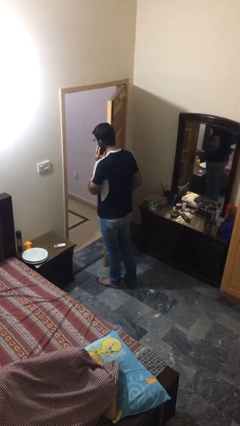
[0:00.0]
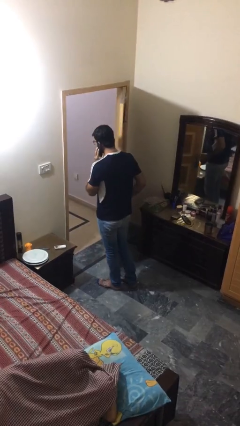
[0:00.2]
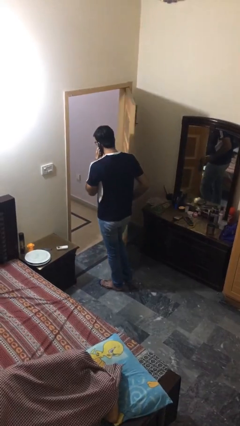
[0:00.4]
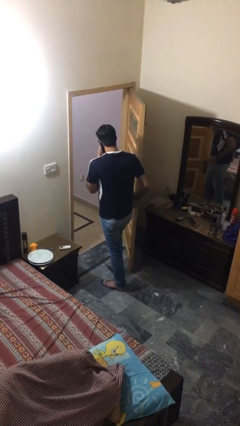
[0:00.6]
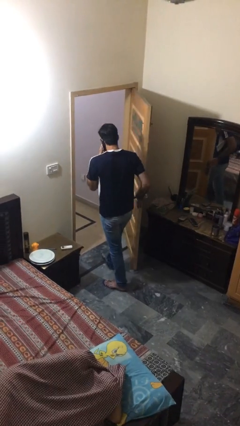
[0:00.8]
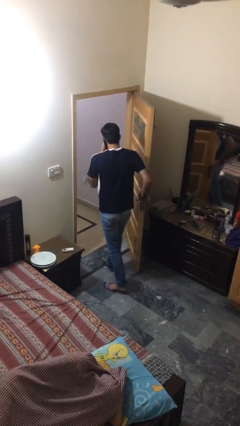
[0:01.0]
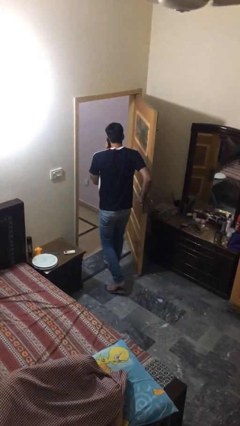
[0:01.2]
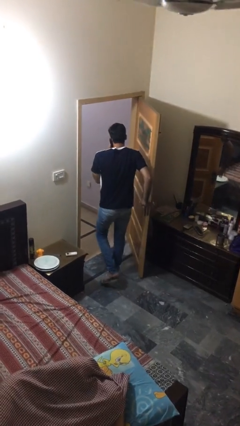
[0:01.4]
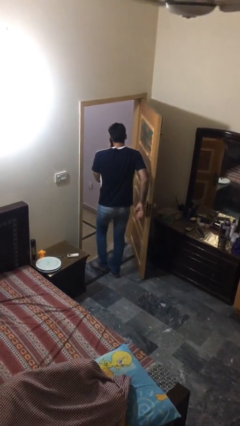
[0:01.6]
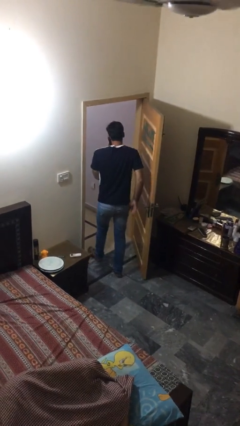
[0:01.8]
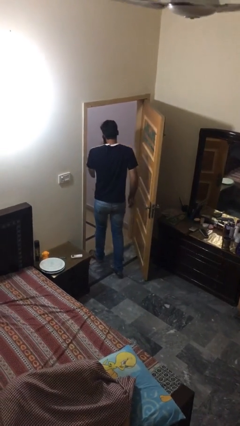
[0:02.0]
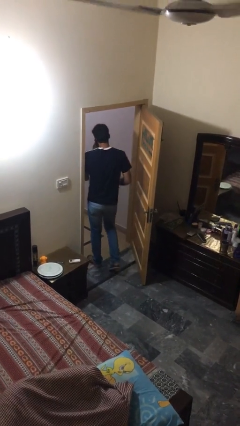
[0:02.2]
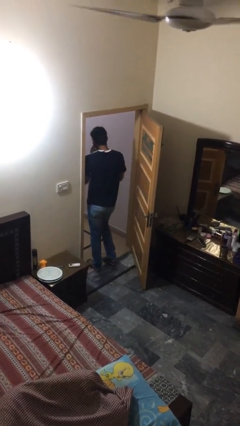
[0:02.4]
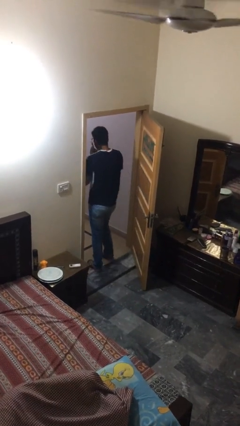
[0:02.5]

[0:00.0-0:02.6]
person exits scene through structure

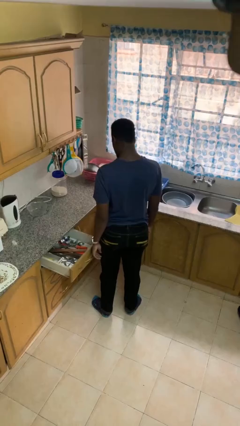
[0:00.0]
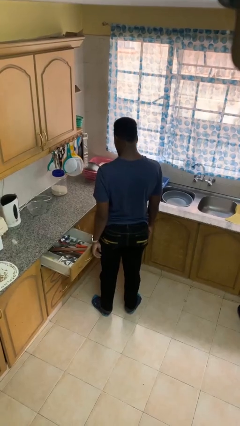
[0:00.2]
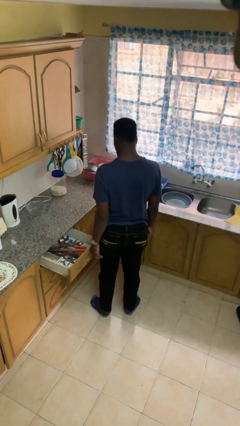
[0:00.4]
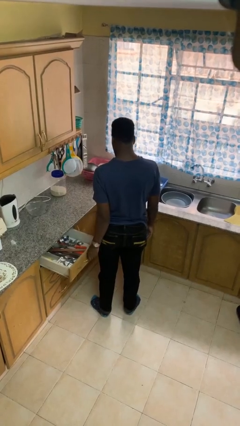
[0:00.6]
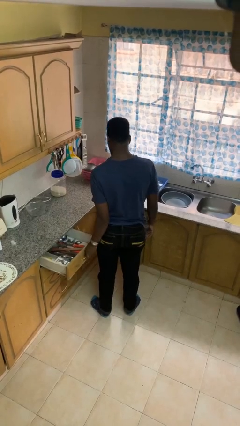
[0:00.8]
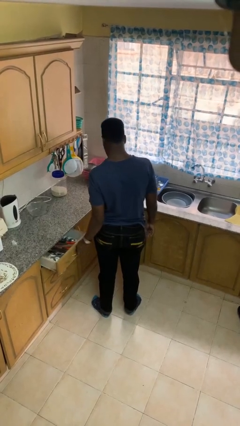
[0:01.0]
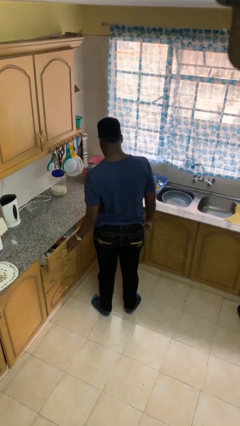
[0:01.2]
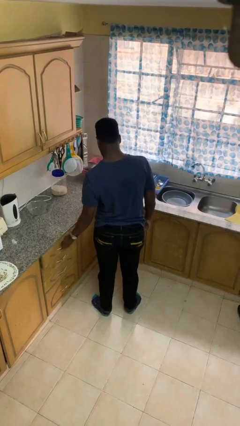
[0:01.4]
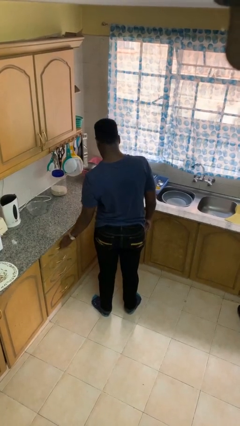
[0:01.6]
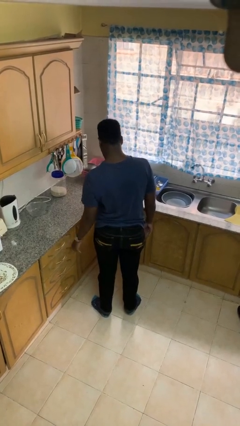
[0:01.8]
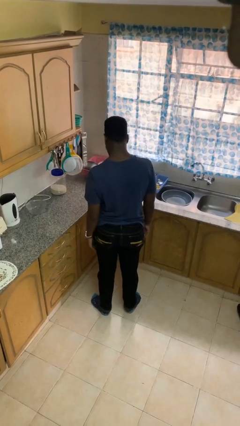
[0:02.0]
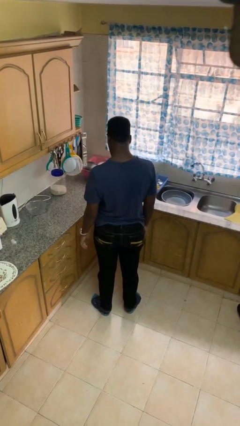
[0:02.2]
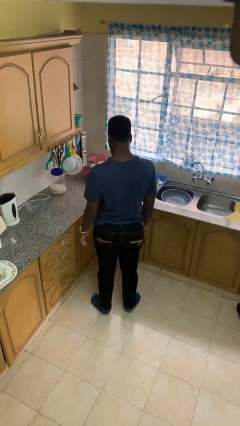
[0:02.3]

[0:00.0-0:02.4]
person closes kitchen drawer

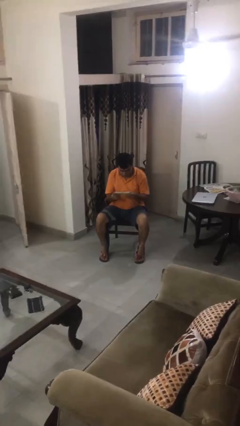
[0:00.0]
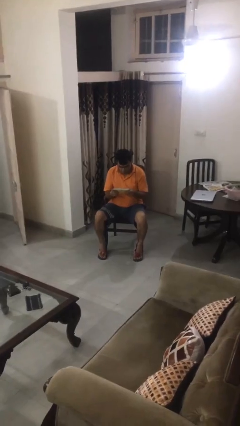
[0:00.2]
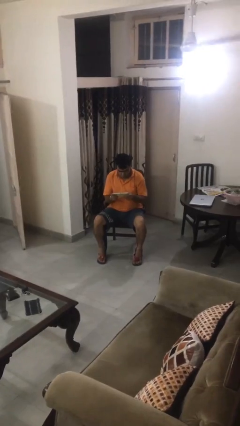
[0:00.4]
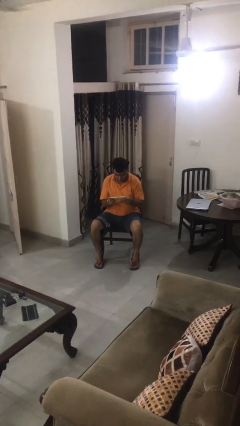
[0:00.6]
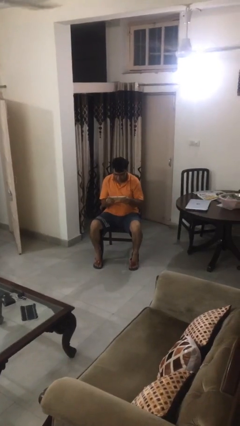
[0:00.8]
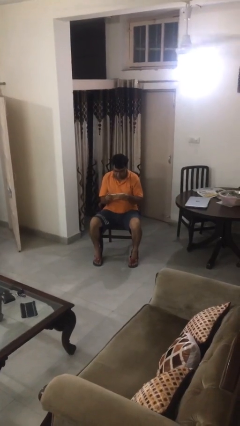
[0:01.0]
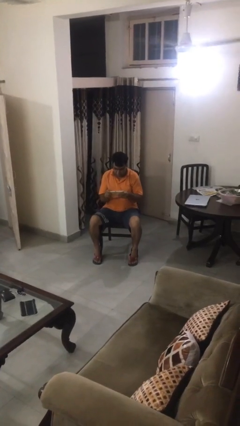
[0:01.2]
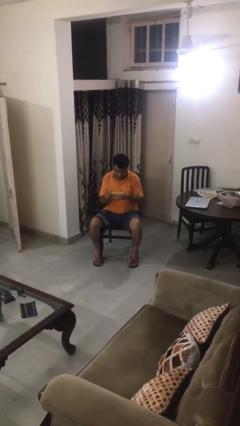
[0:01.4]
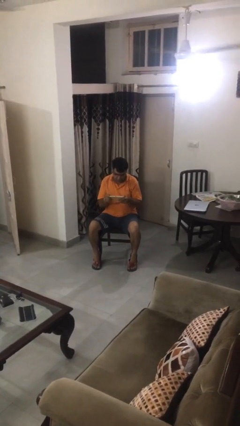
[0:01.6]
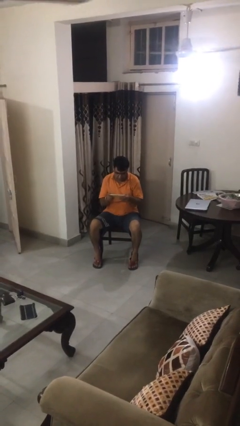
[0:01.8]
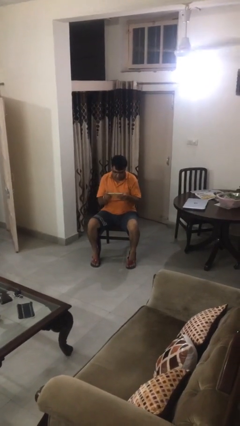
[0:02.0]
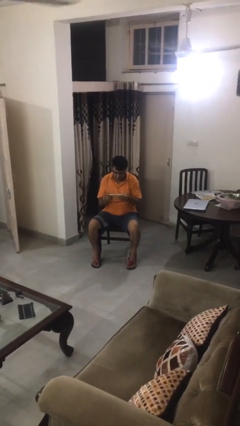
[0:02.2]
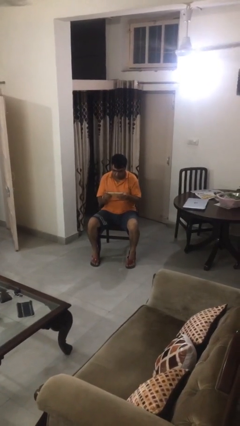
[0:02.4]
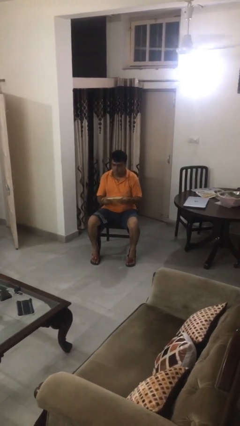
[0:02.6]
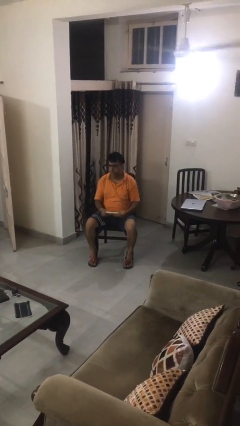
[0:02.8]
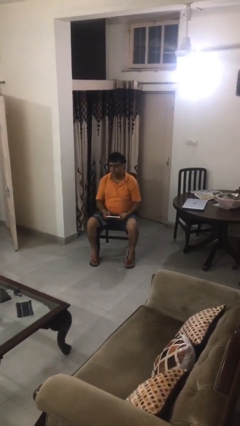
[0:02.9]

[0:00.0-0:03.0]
person interacts with handheld game

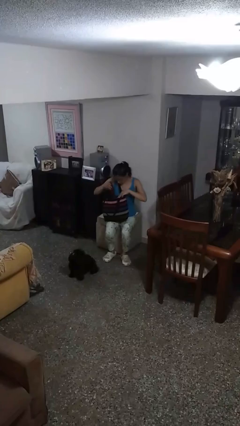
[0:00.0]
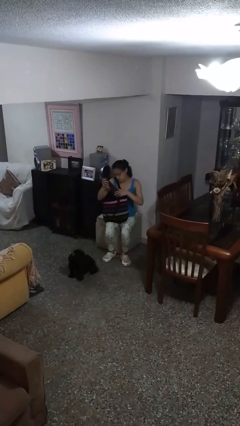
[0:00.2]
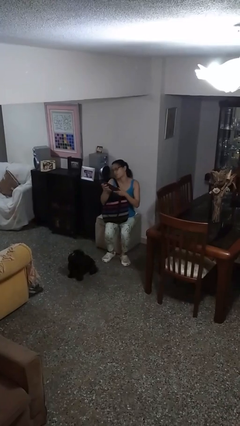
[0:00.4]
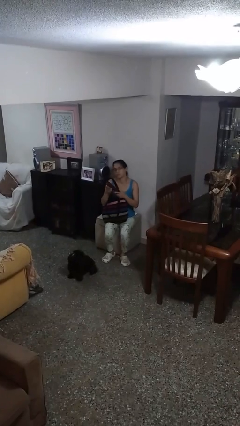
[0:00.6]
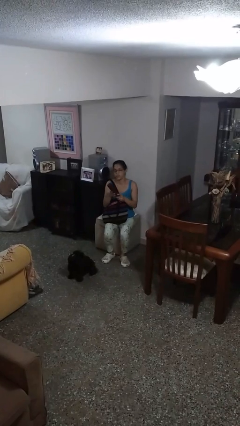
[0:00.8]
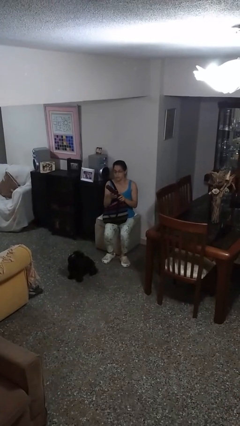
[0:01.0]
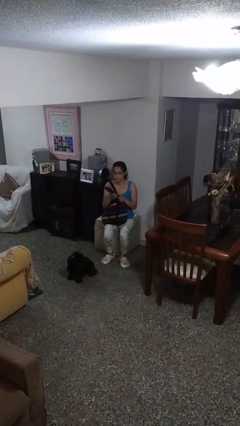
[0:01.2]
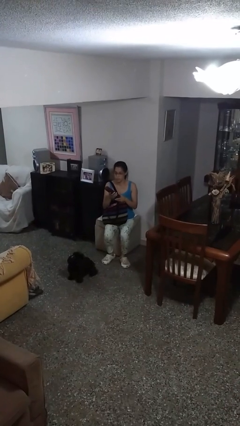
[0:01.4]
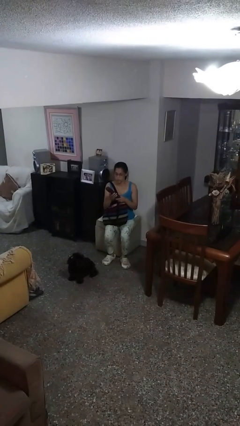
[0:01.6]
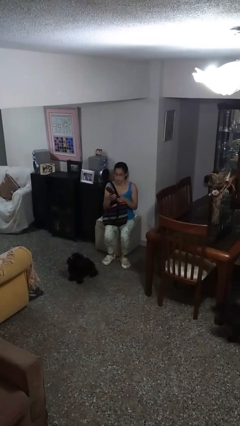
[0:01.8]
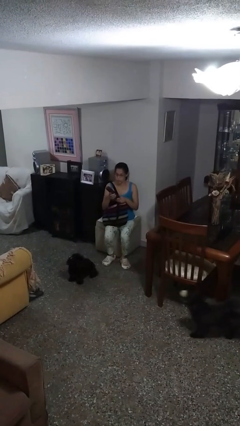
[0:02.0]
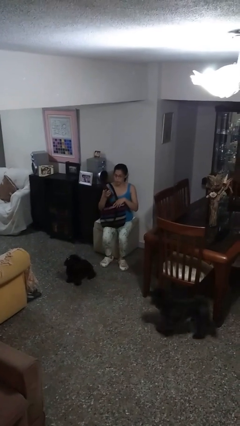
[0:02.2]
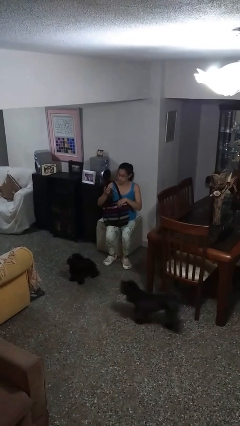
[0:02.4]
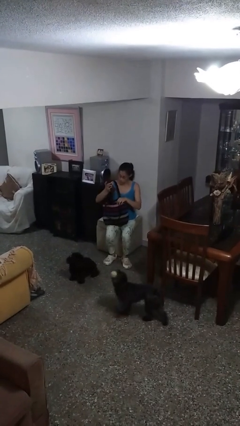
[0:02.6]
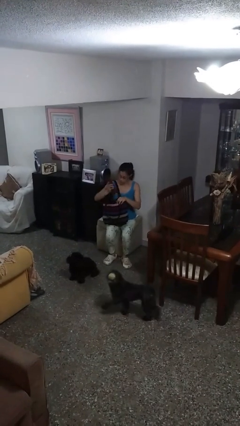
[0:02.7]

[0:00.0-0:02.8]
person takes object from purse

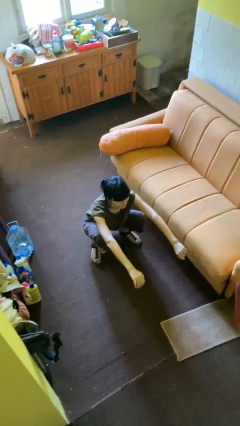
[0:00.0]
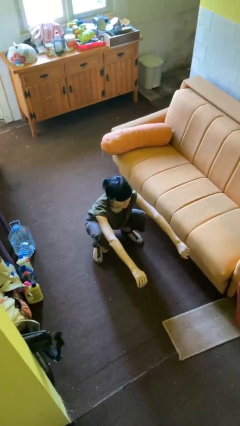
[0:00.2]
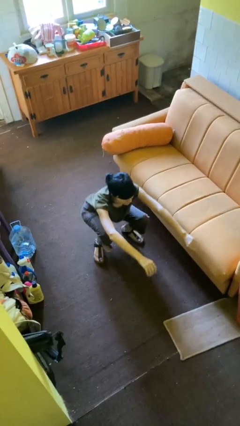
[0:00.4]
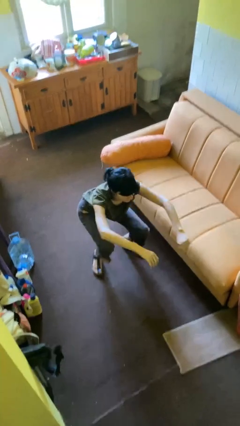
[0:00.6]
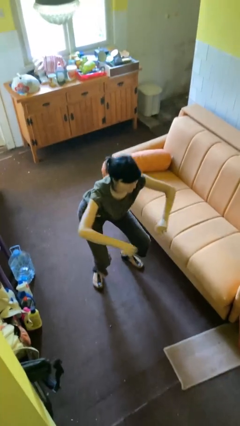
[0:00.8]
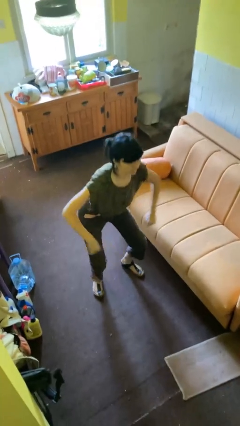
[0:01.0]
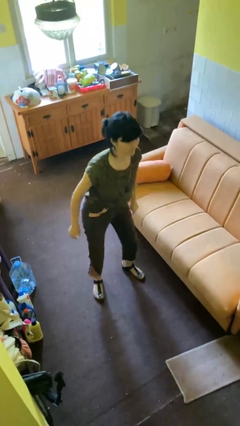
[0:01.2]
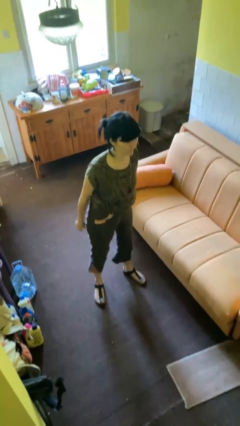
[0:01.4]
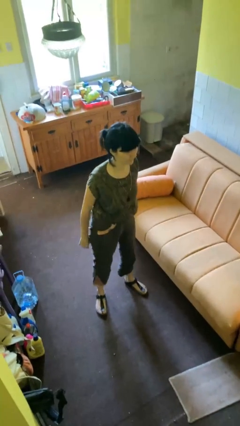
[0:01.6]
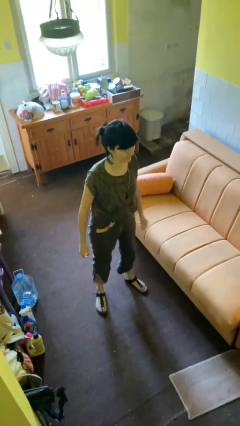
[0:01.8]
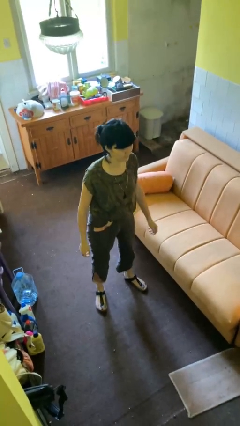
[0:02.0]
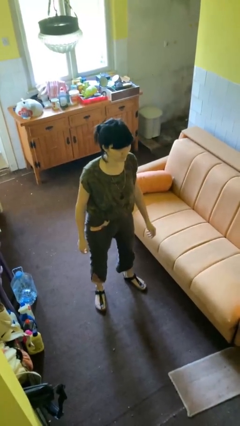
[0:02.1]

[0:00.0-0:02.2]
person stands up

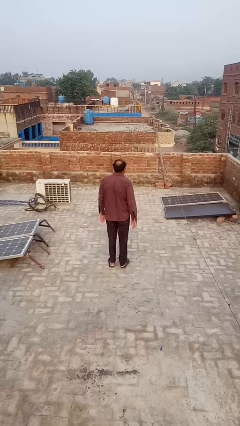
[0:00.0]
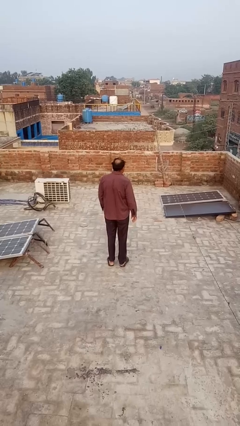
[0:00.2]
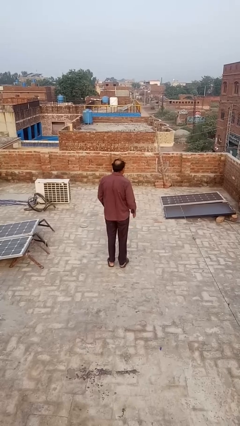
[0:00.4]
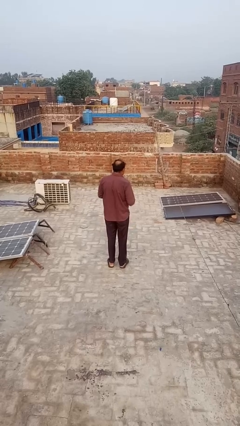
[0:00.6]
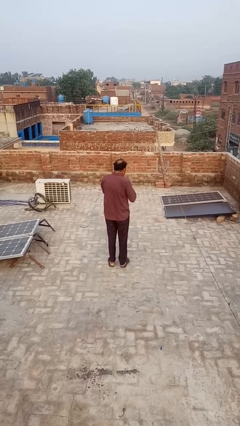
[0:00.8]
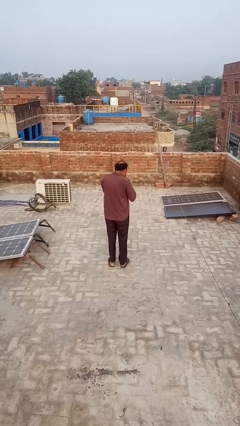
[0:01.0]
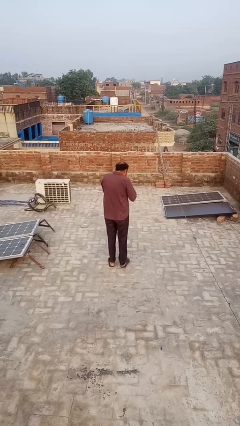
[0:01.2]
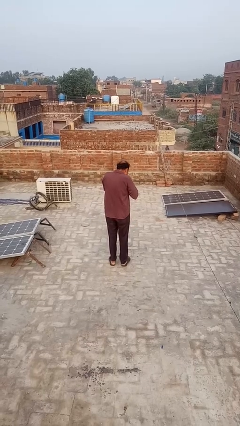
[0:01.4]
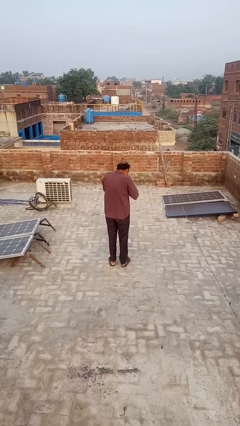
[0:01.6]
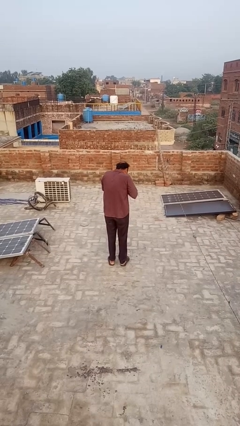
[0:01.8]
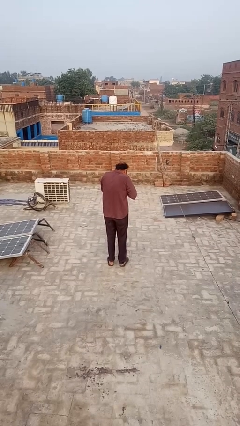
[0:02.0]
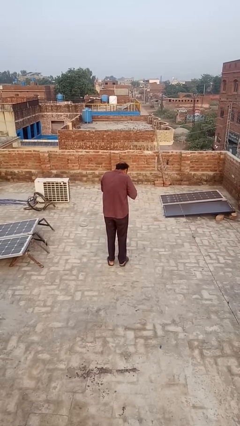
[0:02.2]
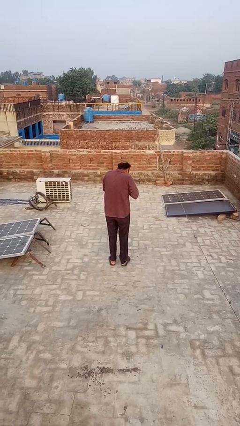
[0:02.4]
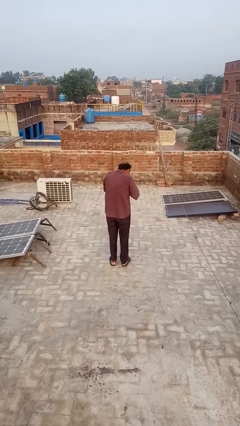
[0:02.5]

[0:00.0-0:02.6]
person blows into hands

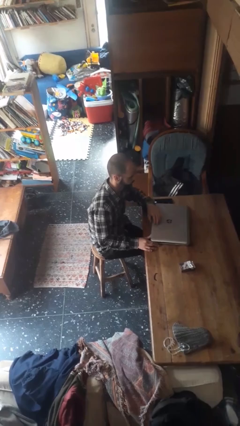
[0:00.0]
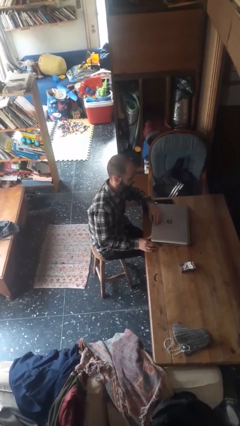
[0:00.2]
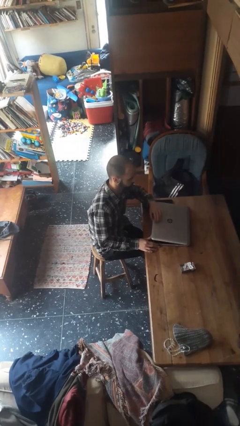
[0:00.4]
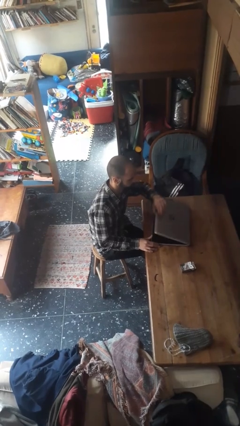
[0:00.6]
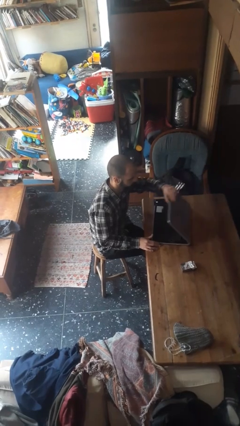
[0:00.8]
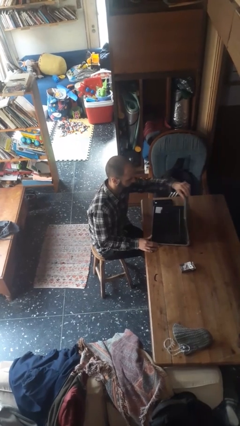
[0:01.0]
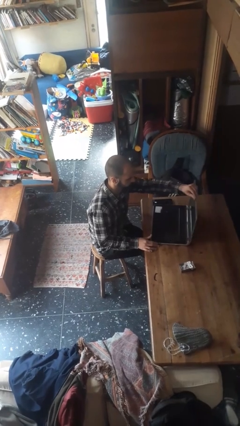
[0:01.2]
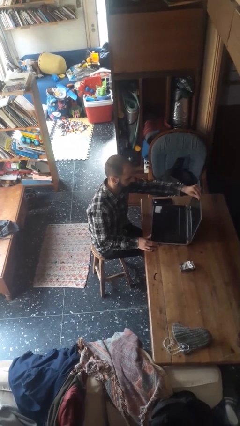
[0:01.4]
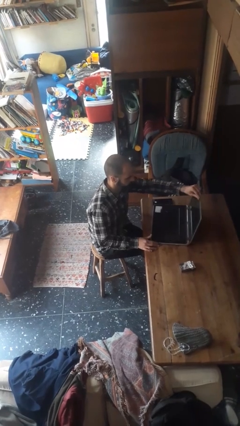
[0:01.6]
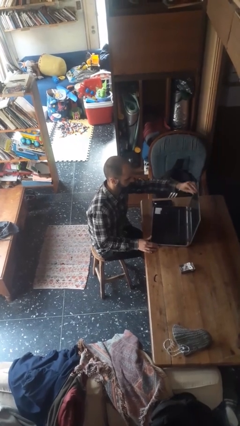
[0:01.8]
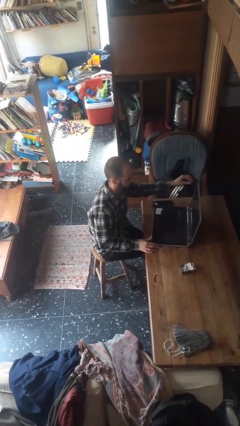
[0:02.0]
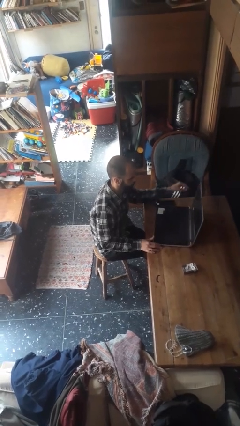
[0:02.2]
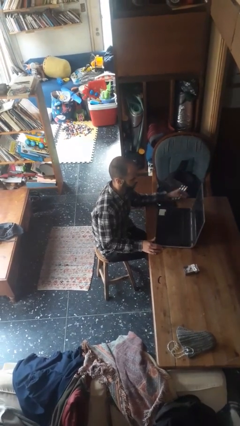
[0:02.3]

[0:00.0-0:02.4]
person opens laptop
